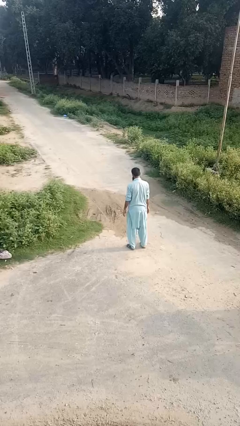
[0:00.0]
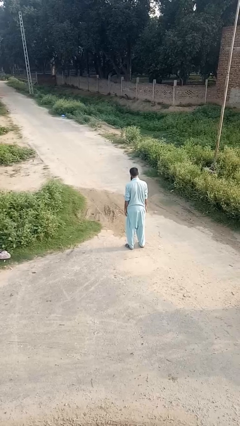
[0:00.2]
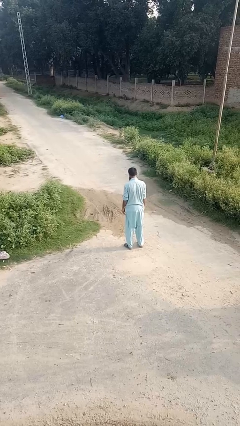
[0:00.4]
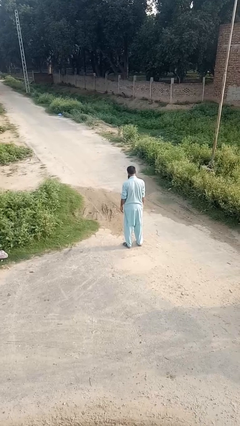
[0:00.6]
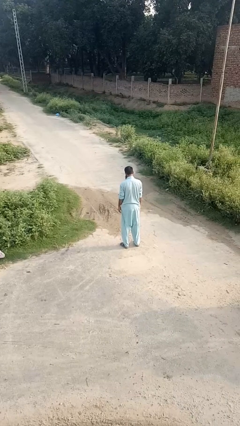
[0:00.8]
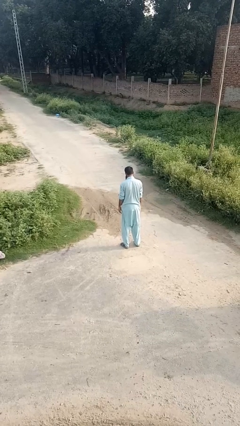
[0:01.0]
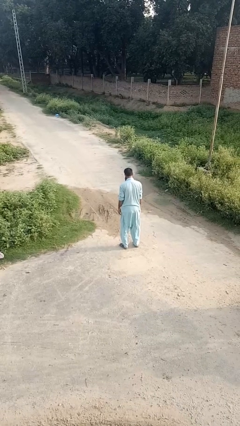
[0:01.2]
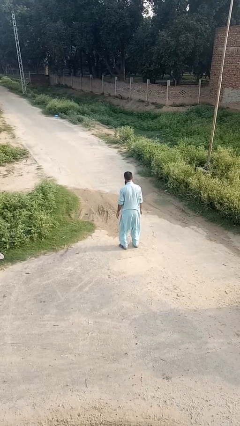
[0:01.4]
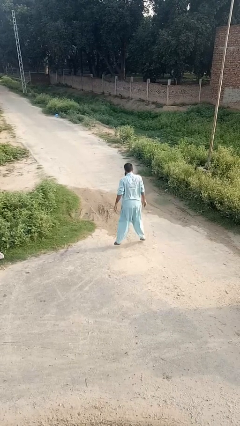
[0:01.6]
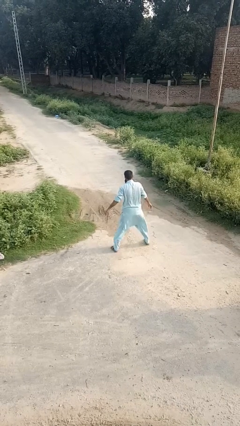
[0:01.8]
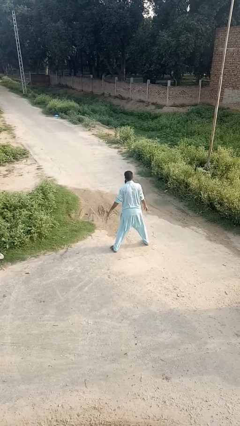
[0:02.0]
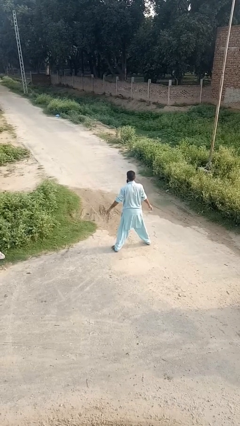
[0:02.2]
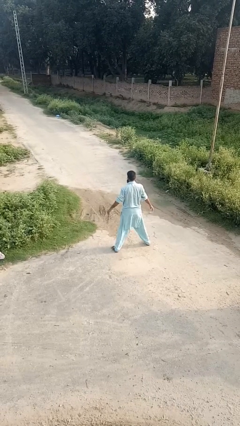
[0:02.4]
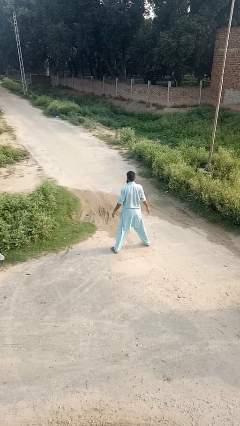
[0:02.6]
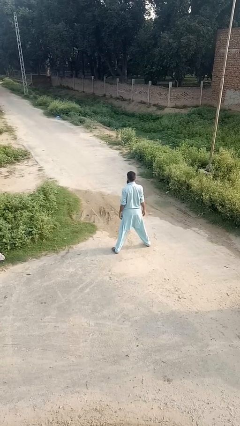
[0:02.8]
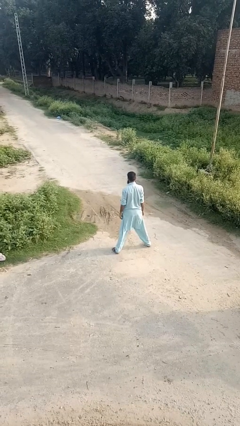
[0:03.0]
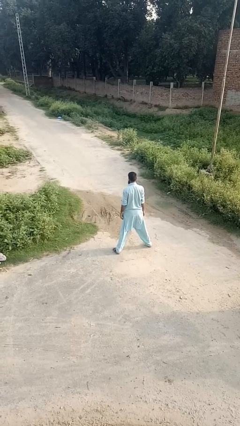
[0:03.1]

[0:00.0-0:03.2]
person stretches back

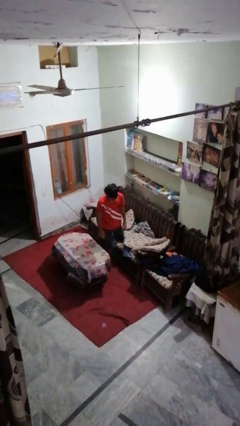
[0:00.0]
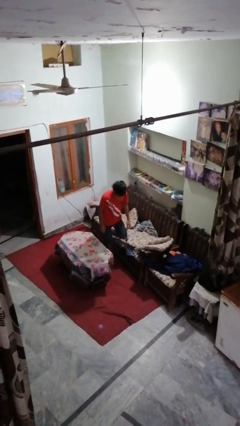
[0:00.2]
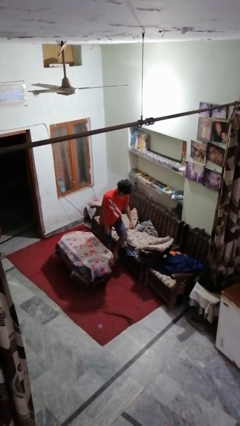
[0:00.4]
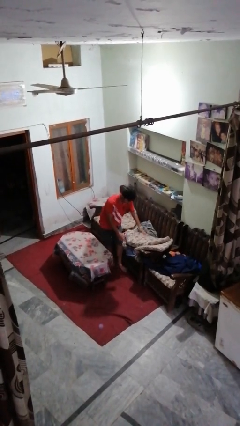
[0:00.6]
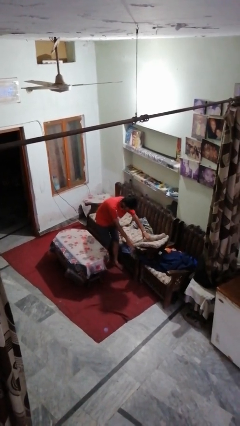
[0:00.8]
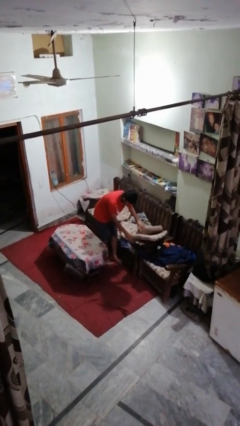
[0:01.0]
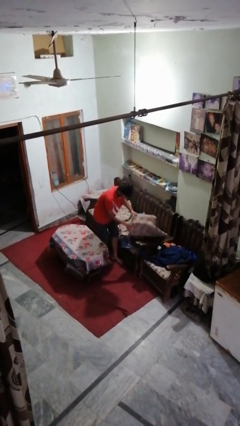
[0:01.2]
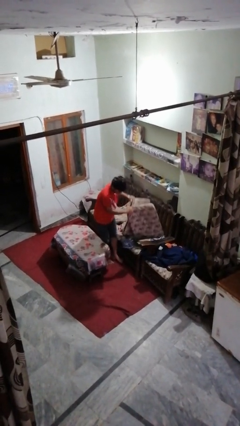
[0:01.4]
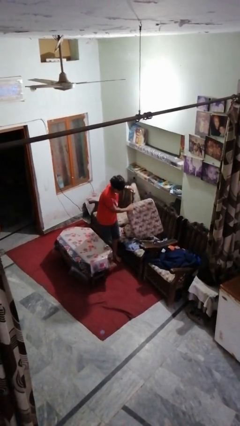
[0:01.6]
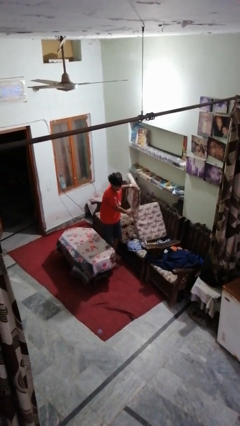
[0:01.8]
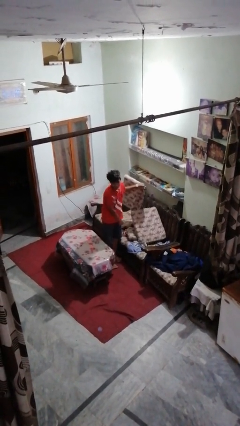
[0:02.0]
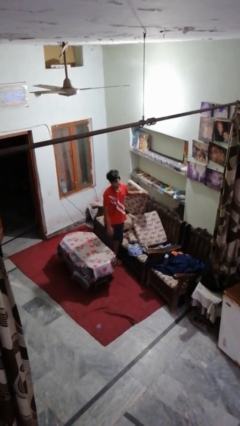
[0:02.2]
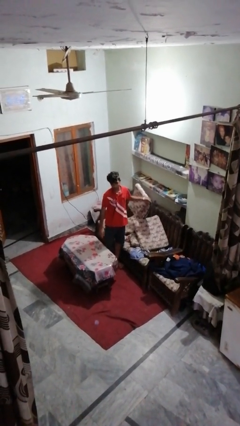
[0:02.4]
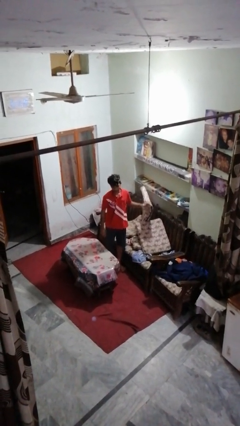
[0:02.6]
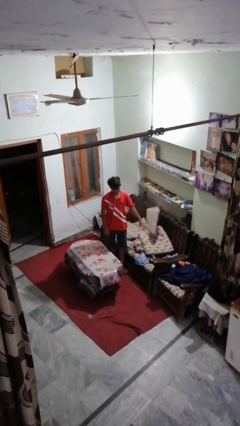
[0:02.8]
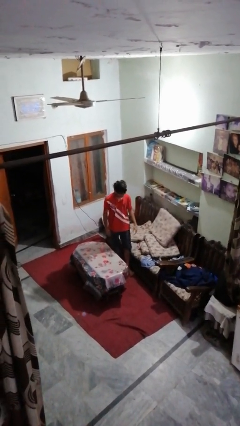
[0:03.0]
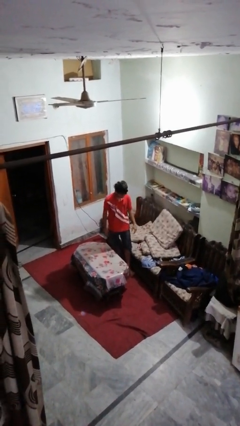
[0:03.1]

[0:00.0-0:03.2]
person searches in couch

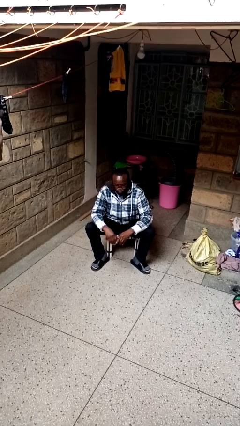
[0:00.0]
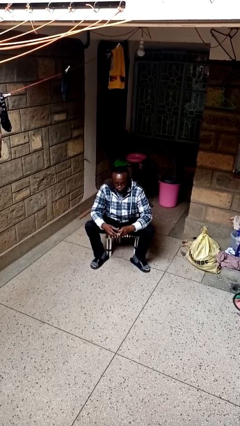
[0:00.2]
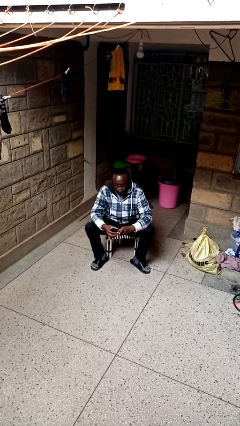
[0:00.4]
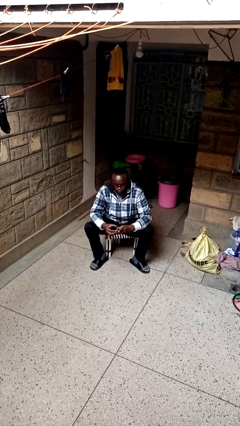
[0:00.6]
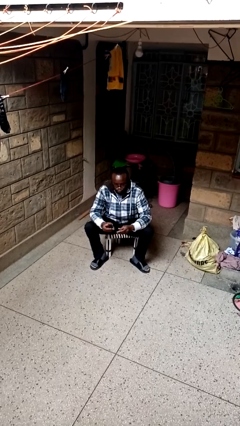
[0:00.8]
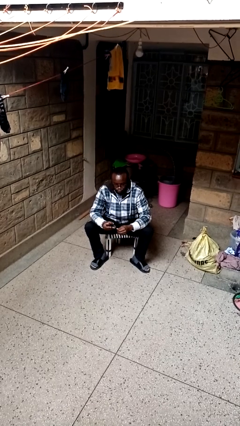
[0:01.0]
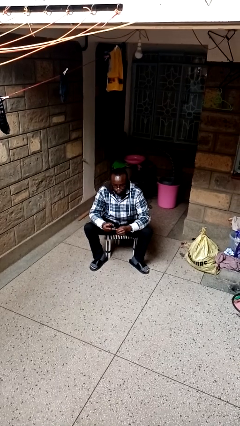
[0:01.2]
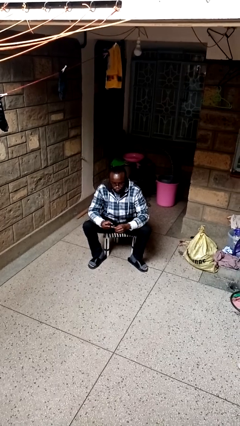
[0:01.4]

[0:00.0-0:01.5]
person clips fingernails

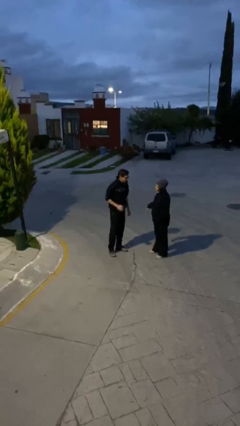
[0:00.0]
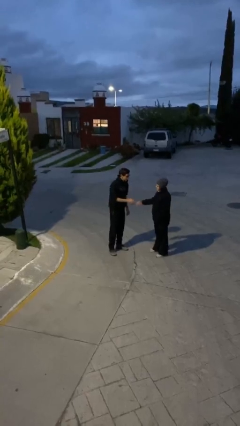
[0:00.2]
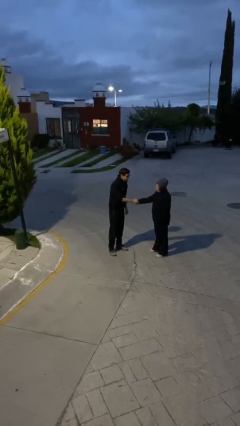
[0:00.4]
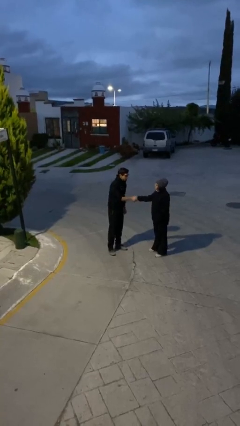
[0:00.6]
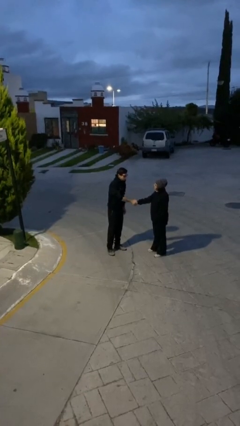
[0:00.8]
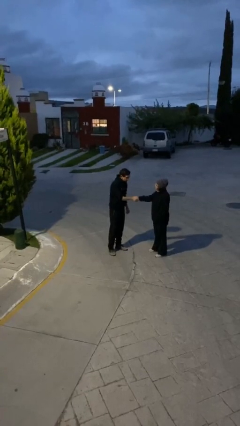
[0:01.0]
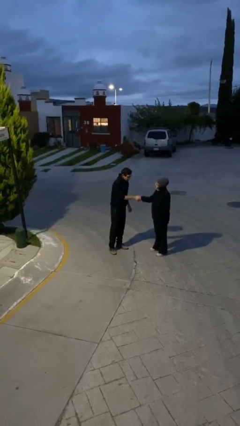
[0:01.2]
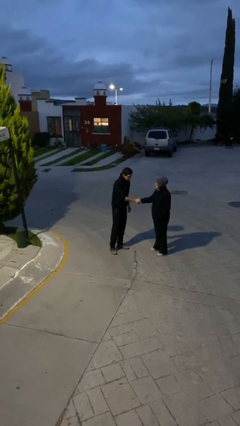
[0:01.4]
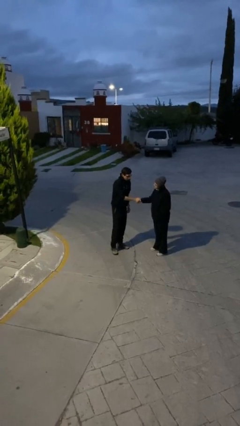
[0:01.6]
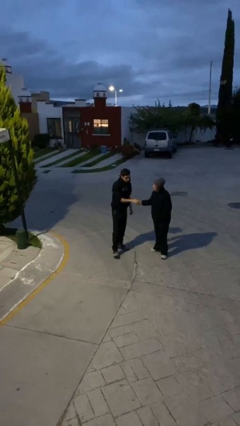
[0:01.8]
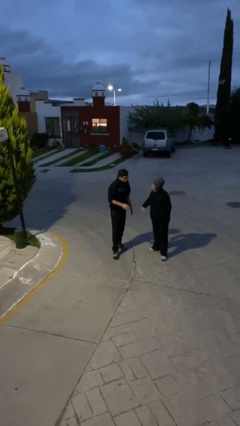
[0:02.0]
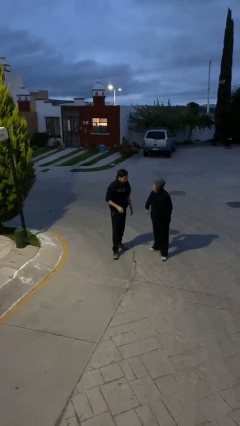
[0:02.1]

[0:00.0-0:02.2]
person shakes hand

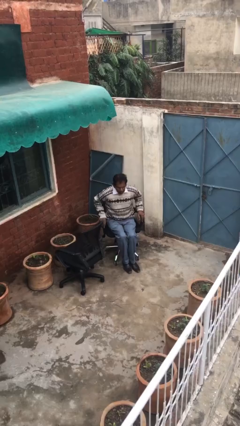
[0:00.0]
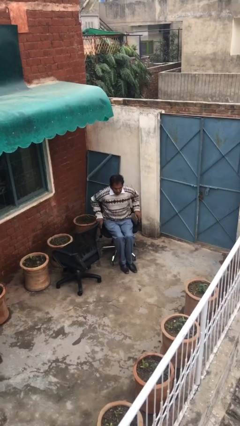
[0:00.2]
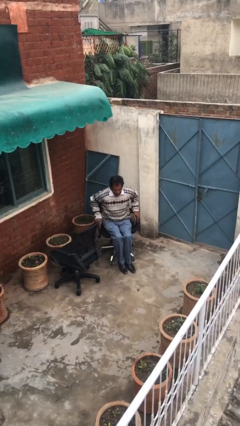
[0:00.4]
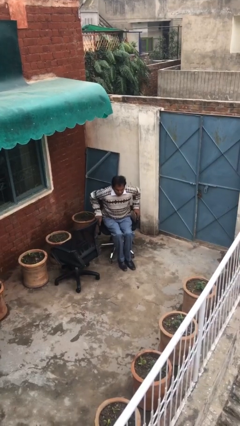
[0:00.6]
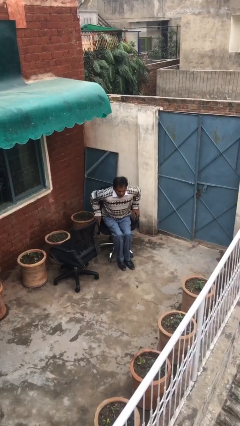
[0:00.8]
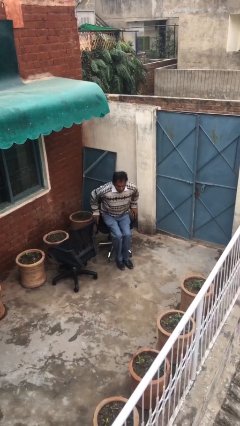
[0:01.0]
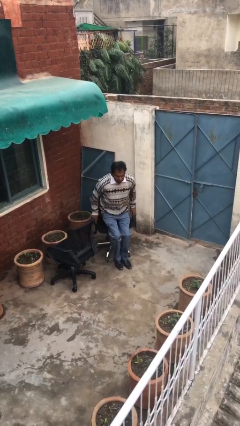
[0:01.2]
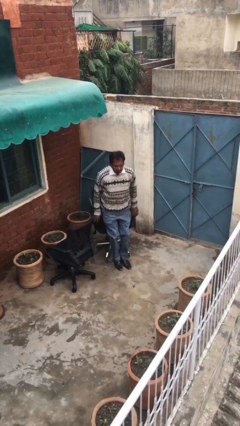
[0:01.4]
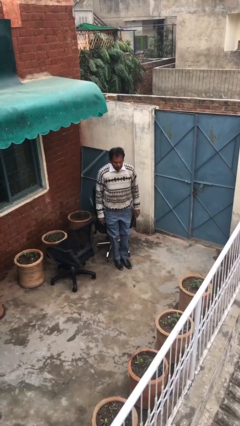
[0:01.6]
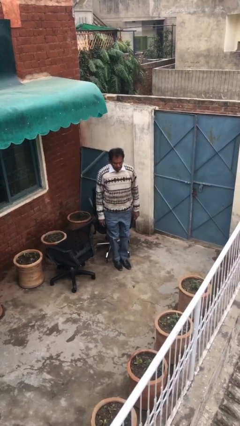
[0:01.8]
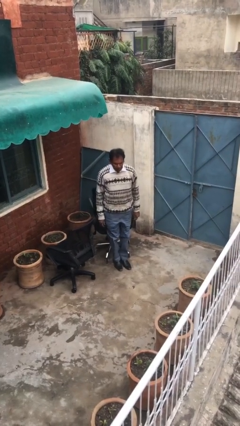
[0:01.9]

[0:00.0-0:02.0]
person stands up

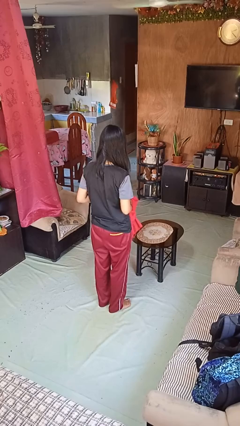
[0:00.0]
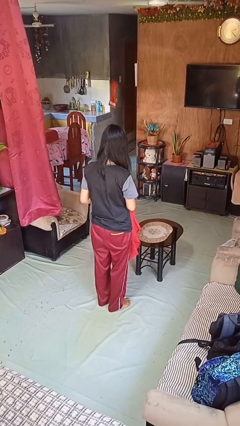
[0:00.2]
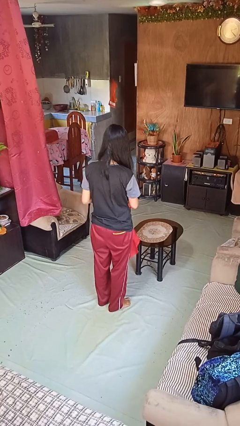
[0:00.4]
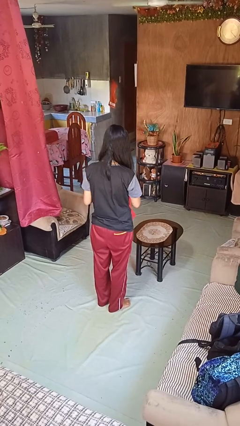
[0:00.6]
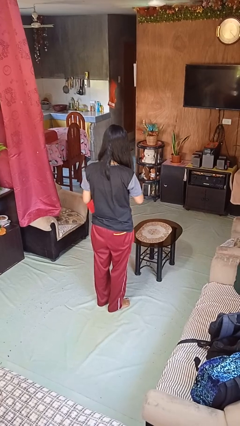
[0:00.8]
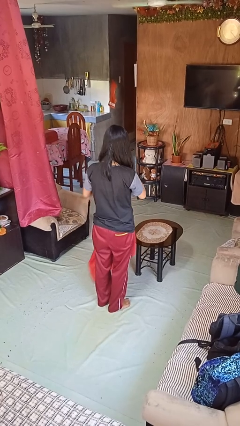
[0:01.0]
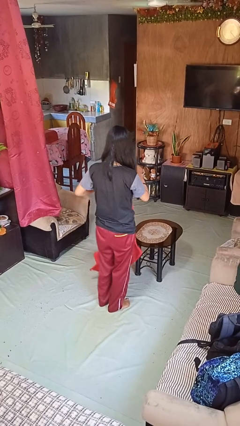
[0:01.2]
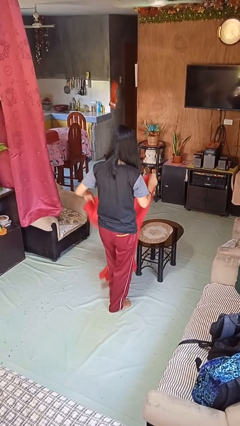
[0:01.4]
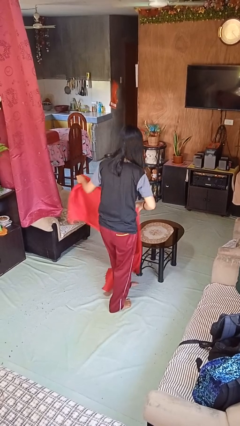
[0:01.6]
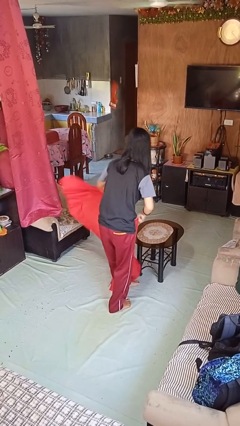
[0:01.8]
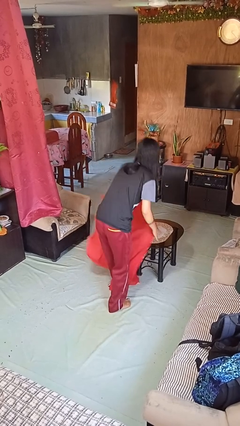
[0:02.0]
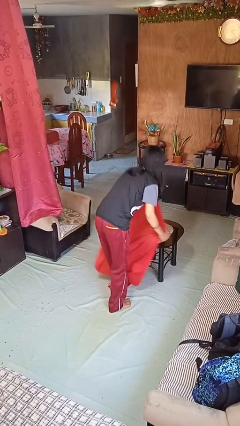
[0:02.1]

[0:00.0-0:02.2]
person spreads tablecloth

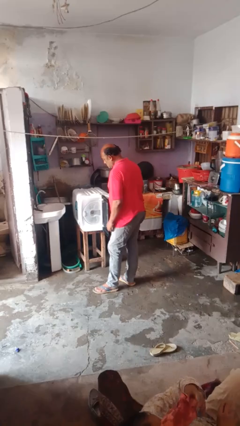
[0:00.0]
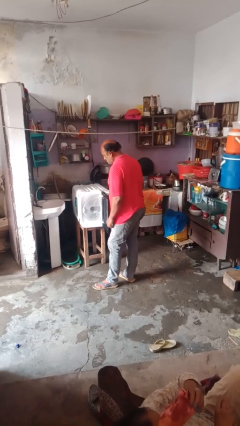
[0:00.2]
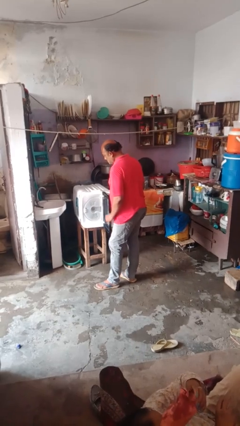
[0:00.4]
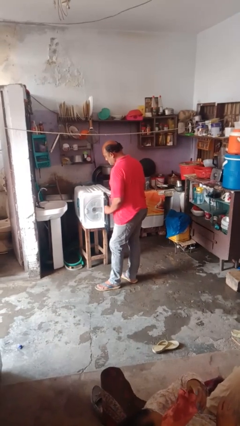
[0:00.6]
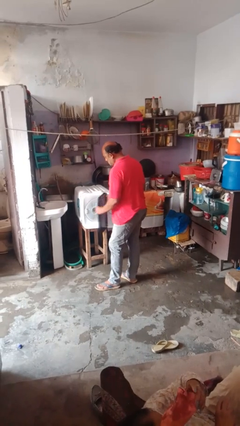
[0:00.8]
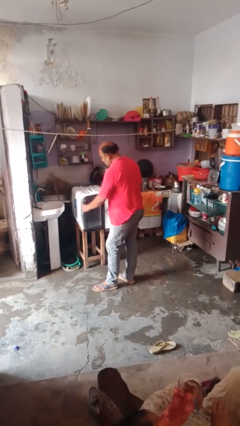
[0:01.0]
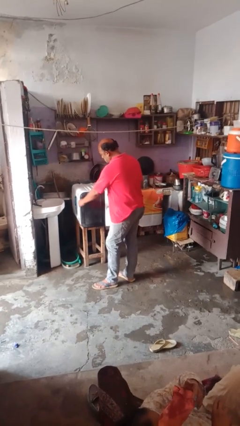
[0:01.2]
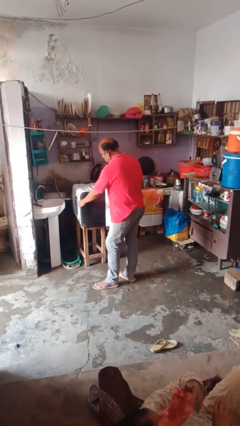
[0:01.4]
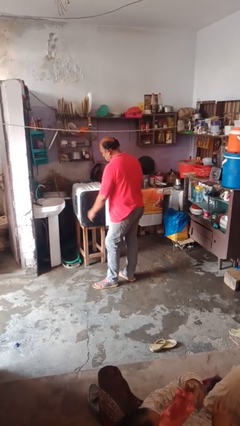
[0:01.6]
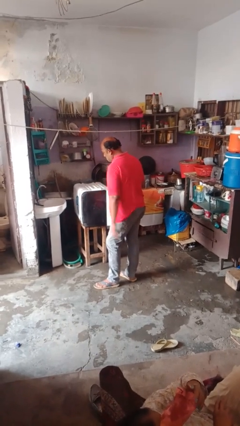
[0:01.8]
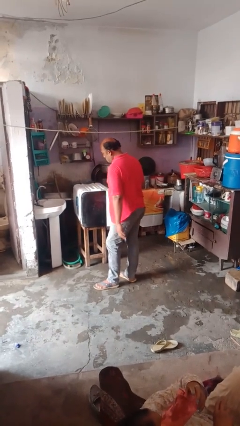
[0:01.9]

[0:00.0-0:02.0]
person closes dishwasher

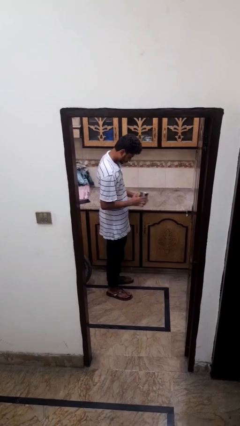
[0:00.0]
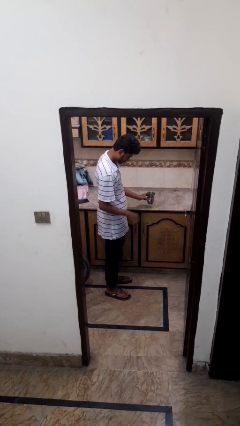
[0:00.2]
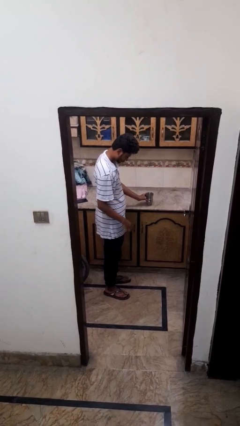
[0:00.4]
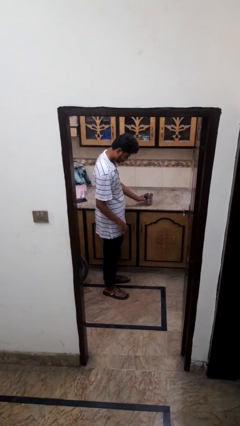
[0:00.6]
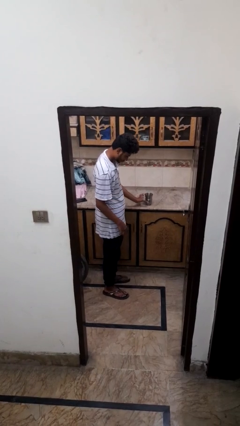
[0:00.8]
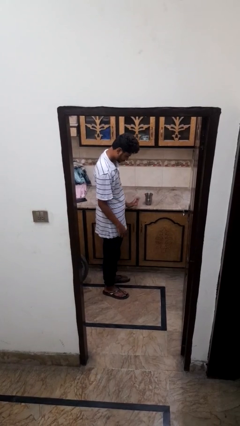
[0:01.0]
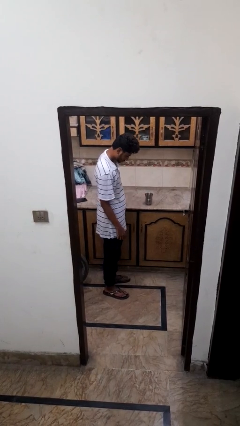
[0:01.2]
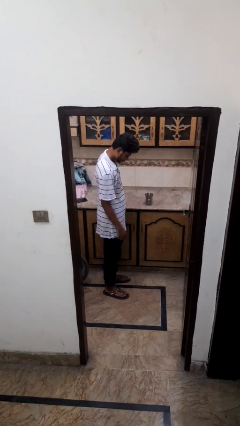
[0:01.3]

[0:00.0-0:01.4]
person puts down object on countertop
